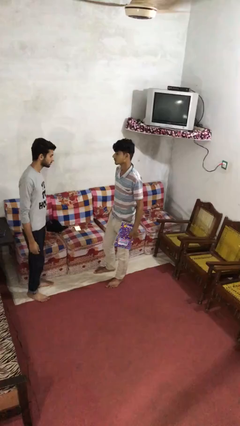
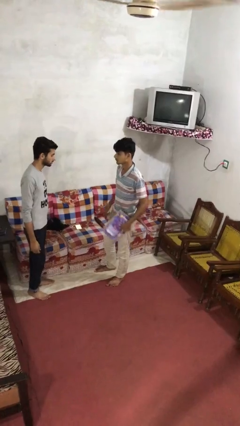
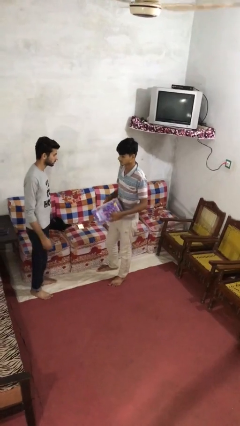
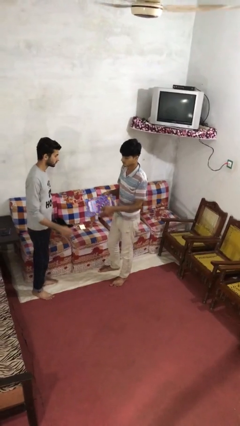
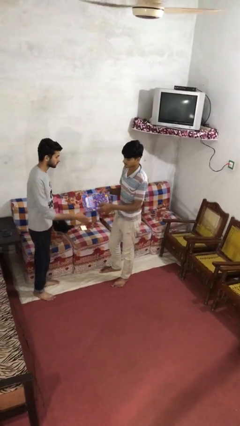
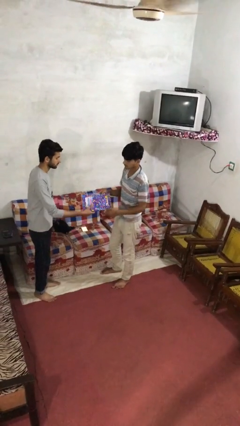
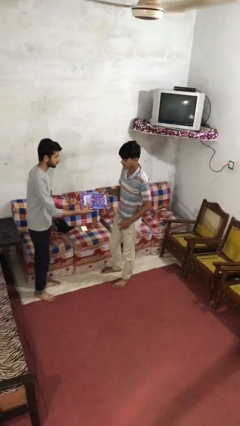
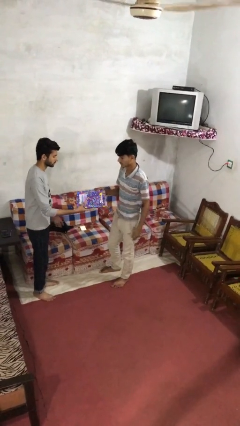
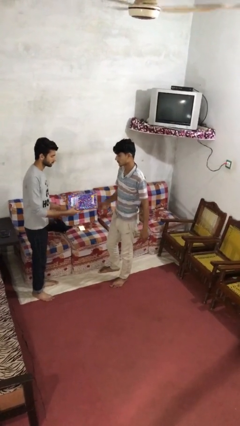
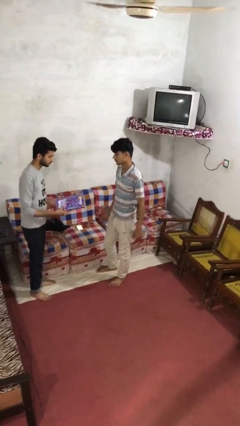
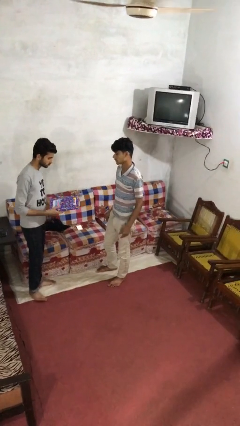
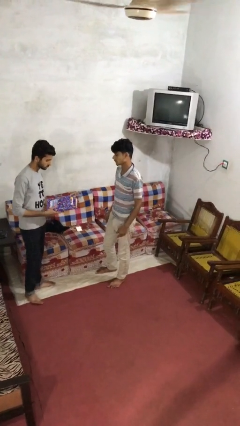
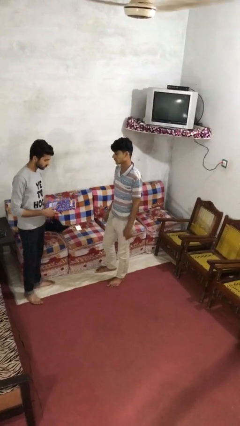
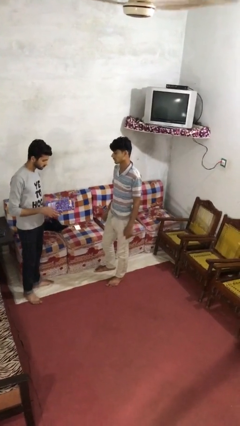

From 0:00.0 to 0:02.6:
person transfers object to person

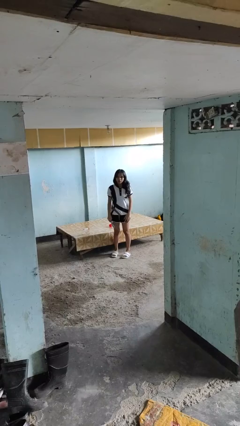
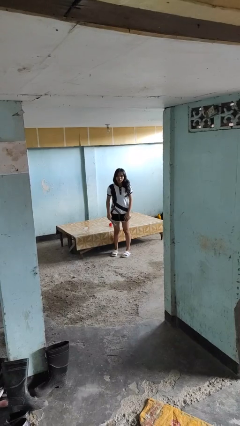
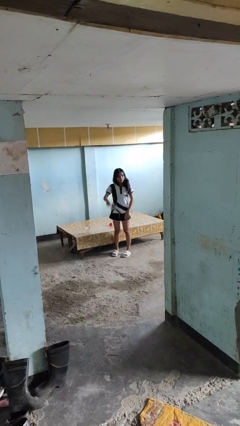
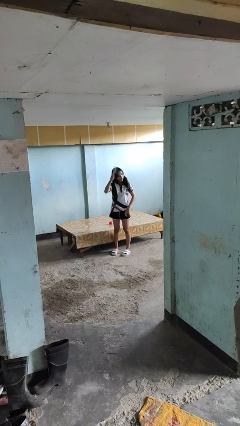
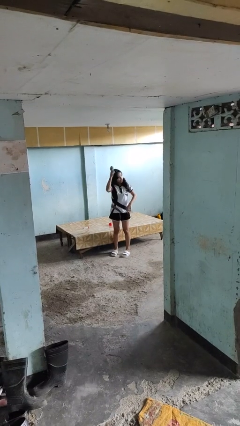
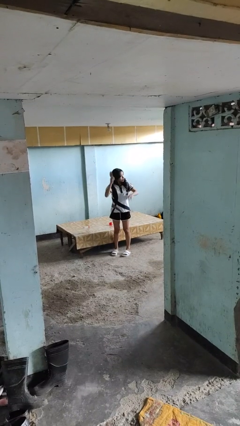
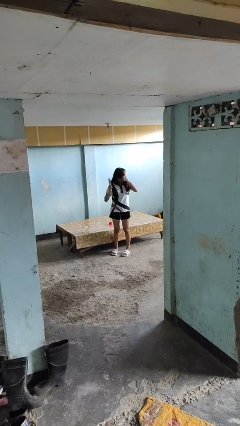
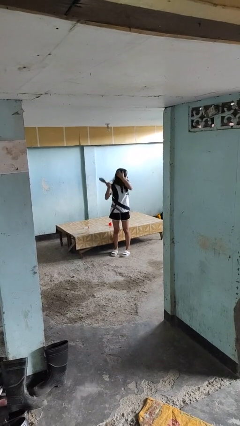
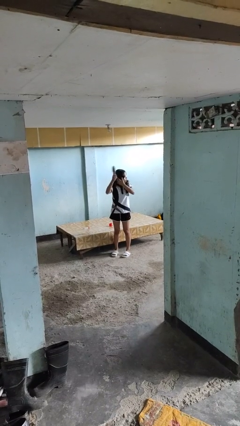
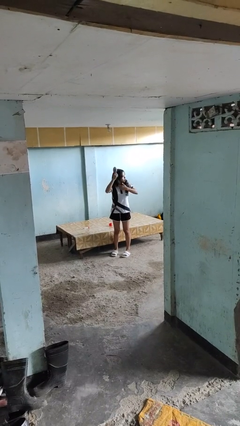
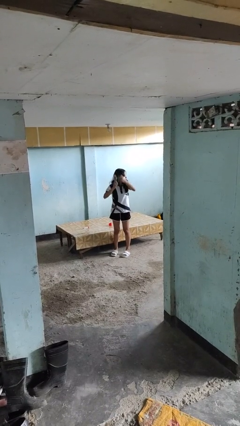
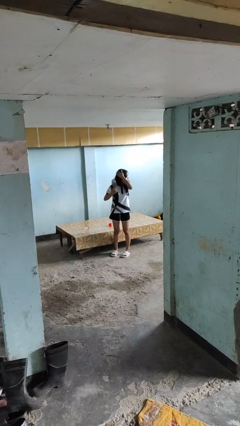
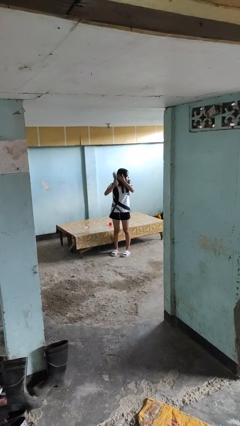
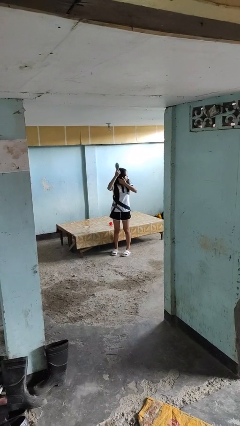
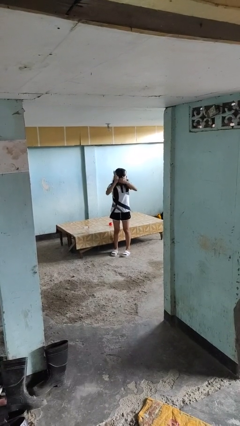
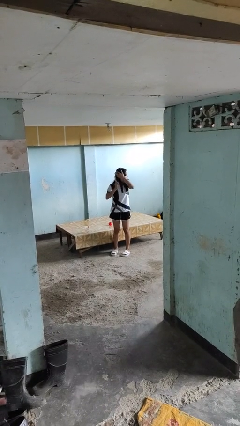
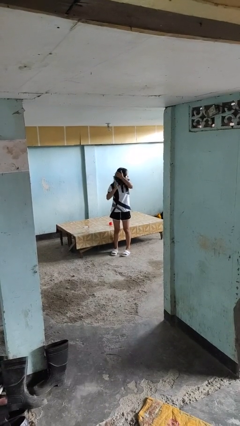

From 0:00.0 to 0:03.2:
person brushes hair

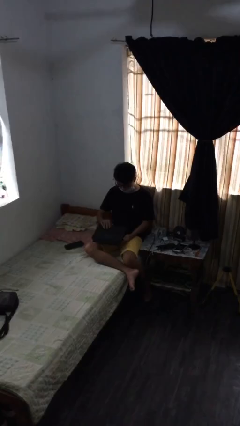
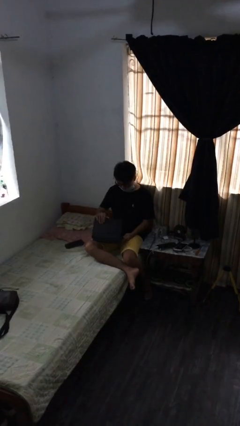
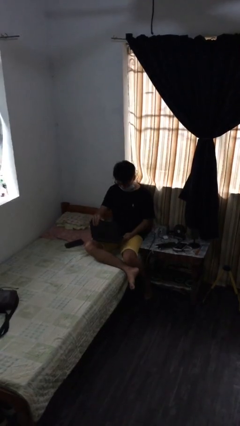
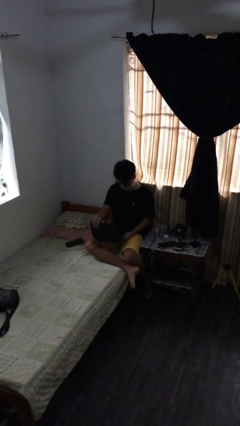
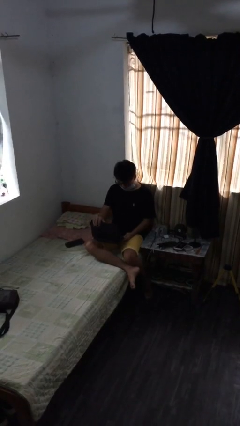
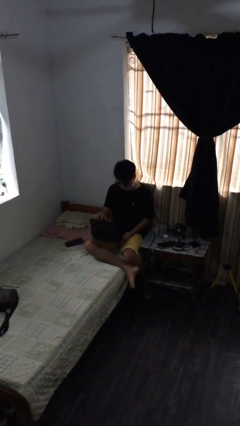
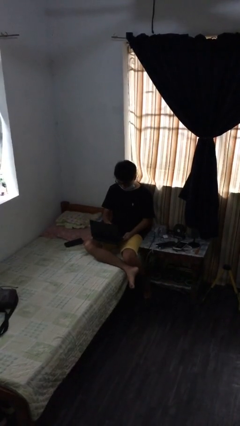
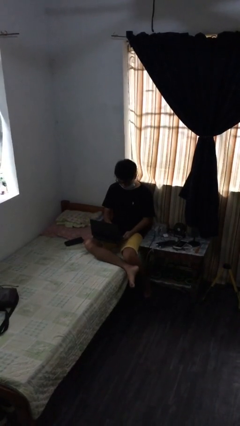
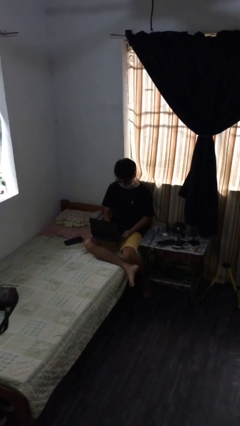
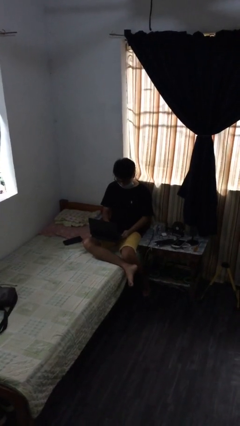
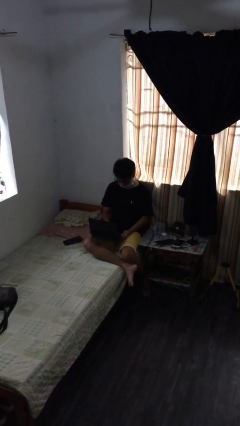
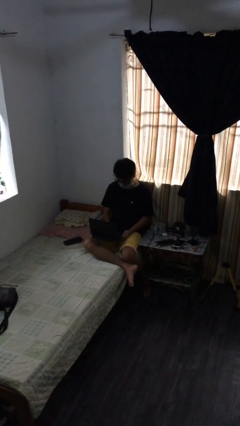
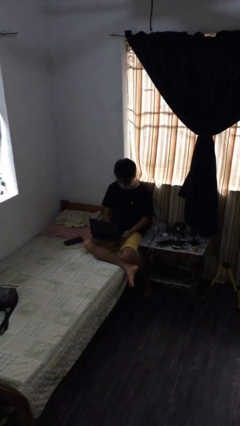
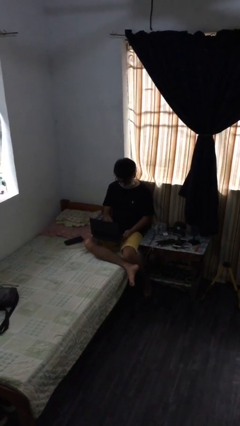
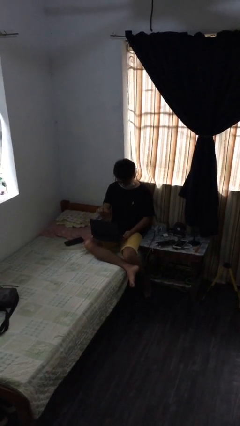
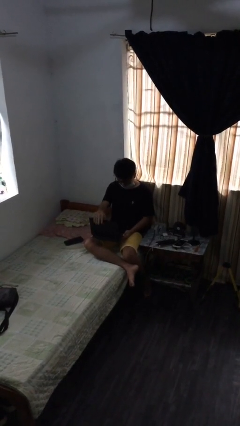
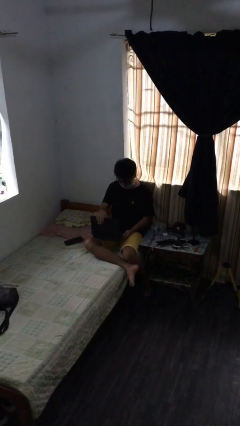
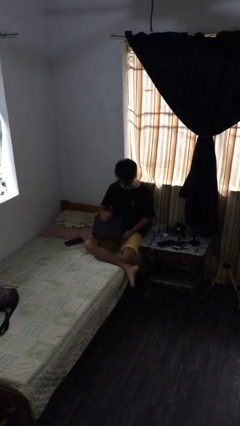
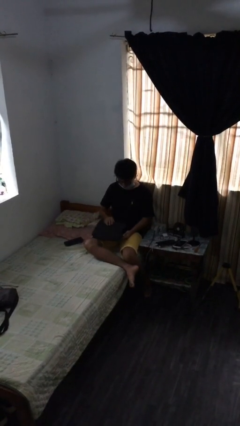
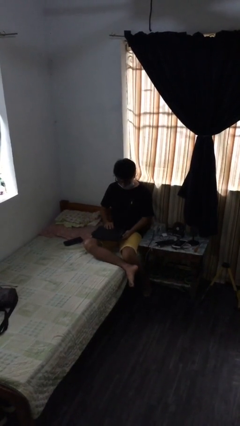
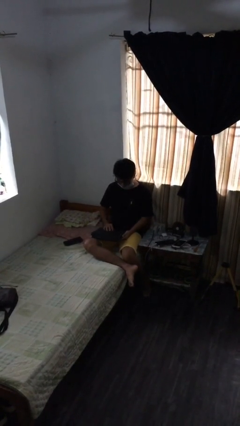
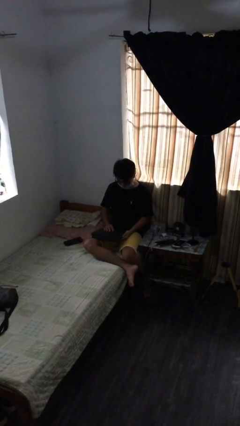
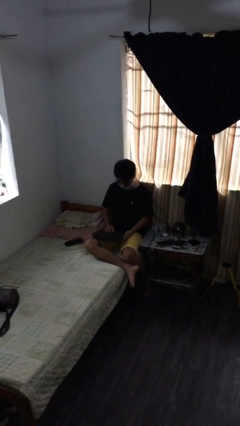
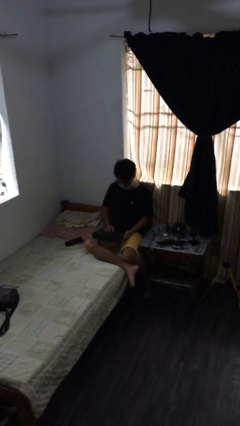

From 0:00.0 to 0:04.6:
person interacts with laptop

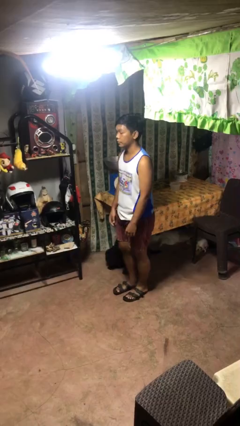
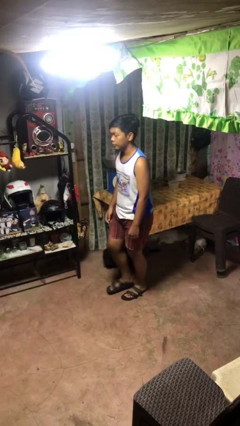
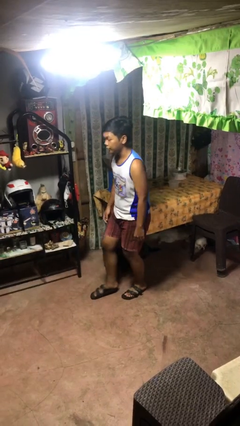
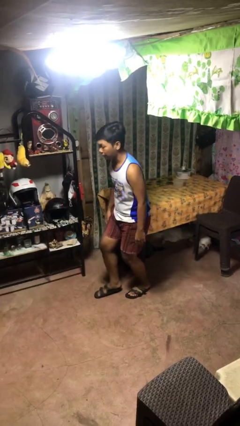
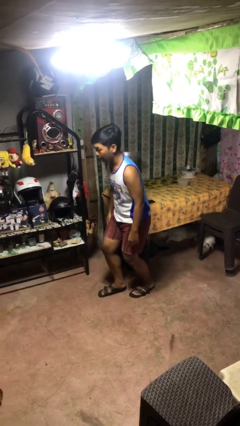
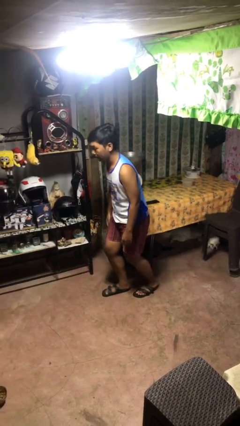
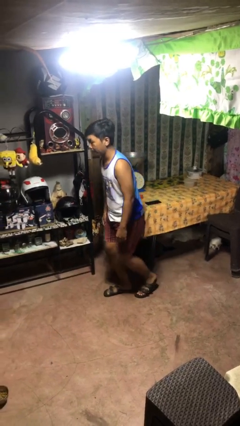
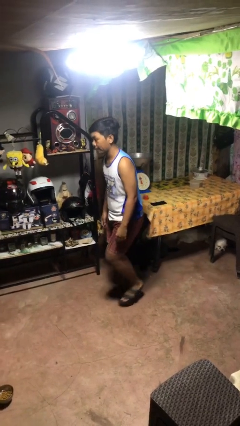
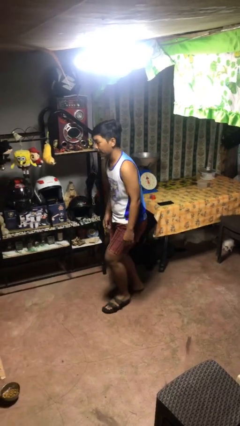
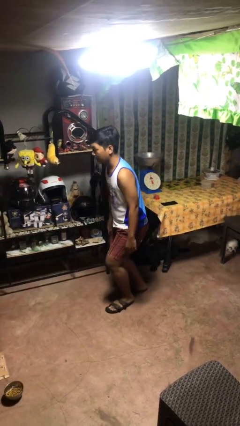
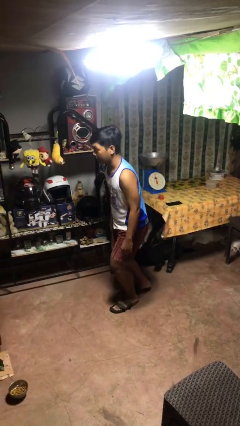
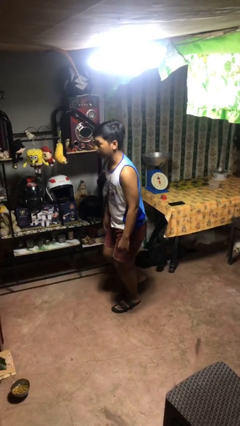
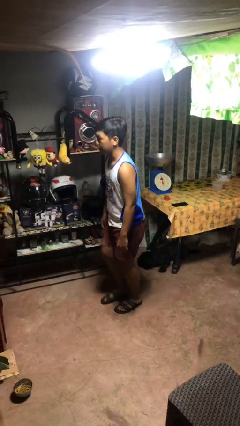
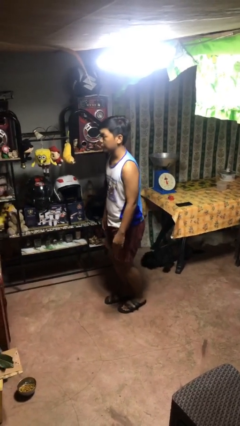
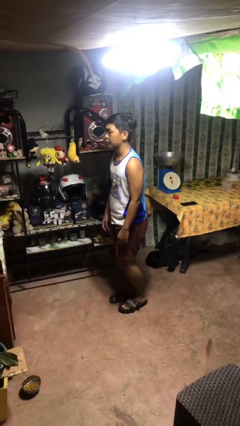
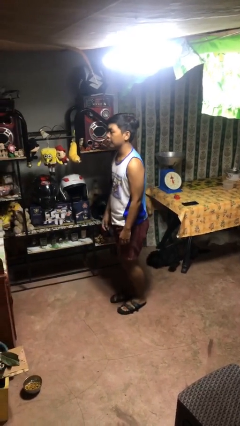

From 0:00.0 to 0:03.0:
person walks tiptoe

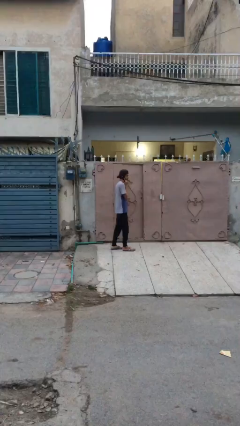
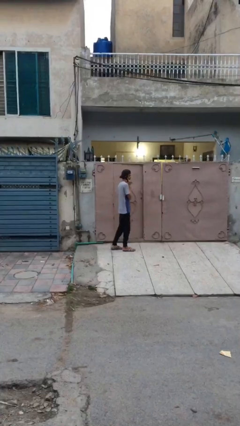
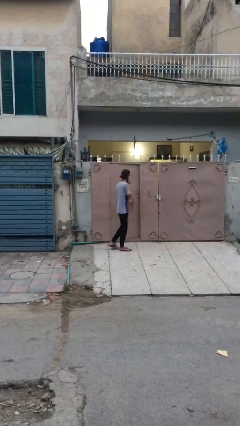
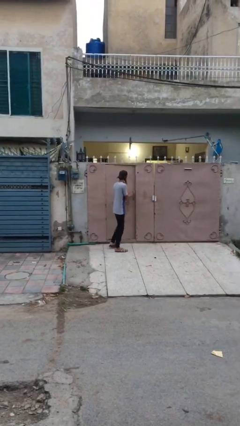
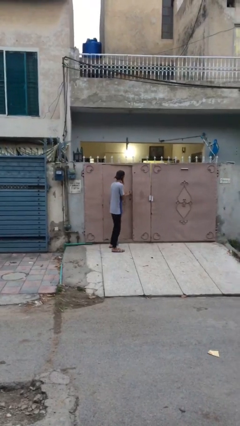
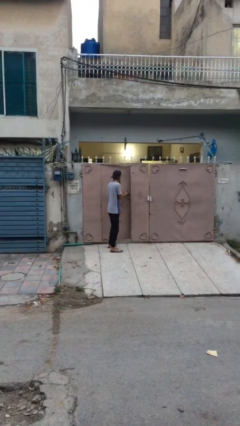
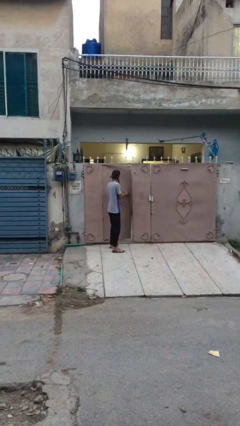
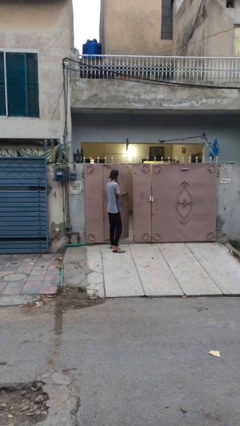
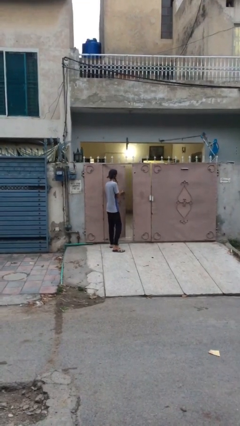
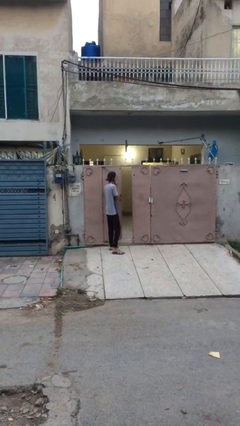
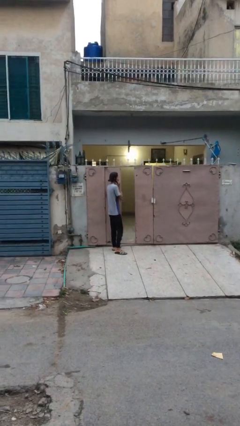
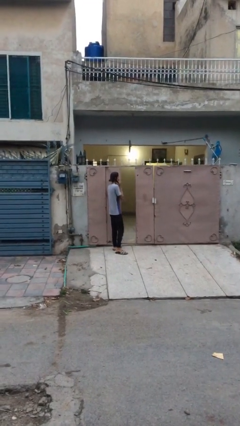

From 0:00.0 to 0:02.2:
person opens facility door

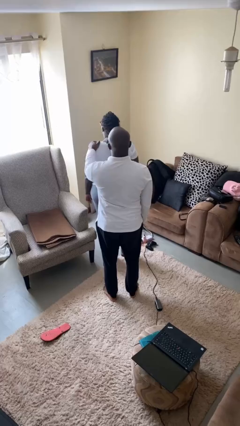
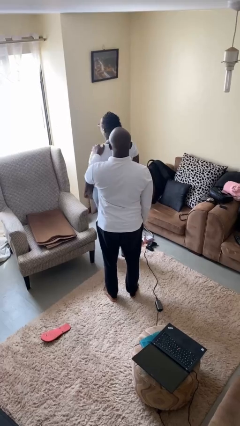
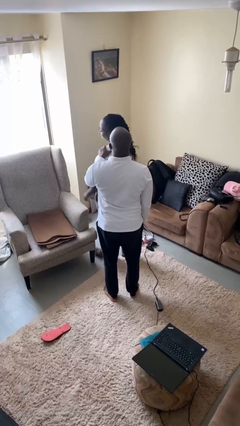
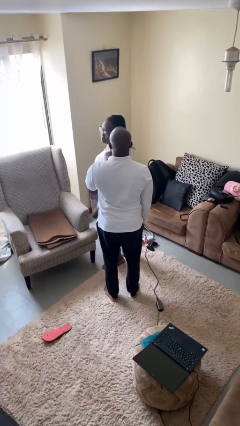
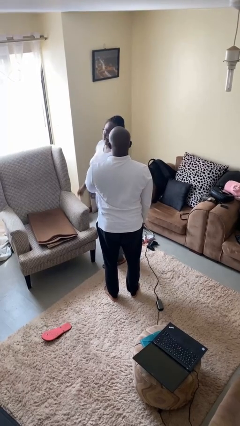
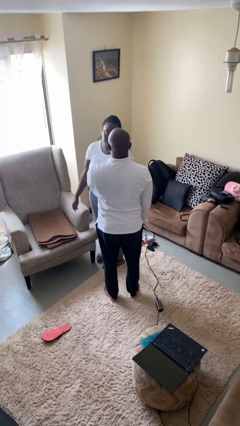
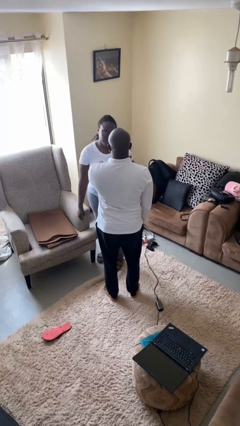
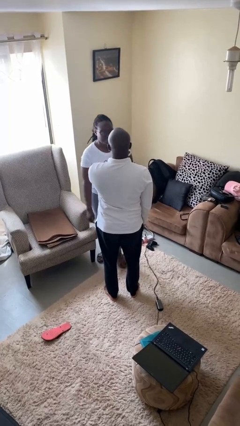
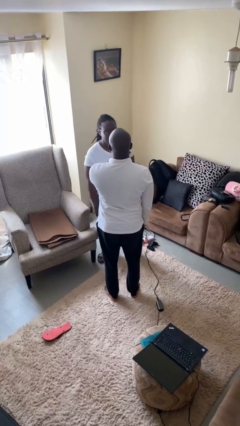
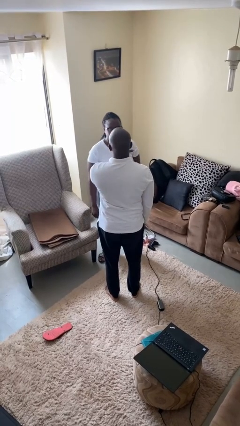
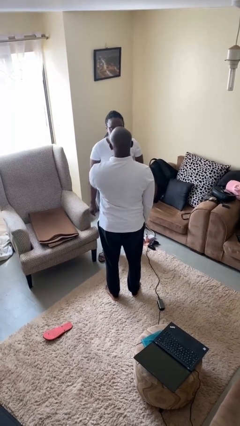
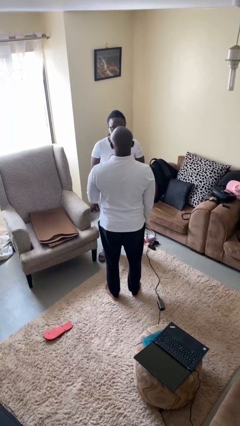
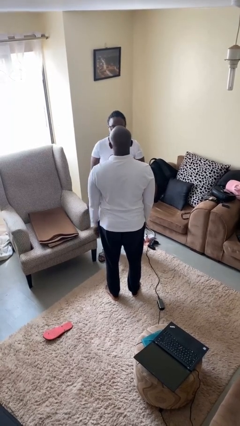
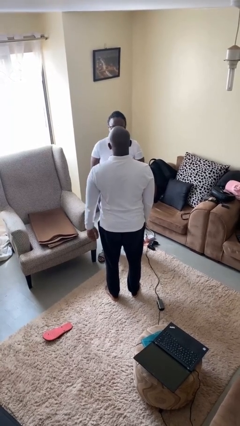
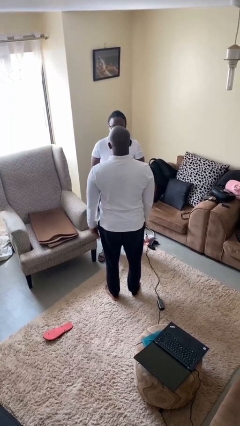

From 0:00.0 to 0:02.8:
person spins person around
